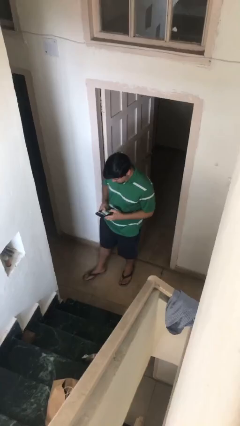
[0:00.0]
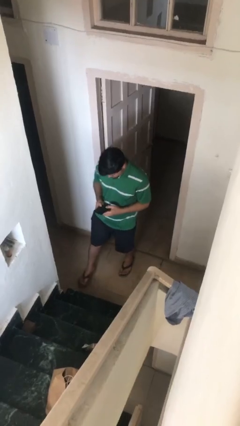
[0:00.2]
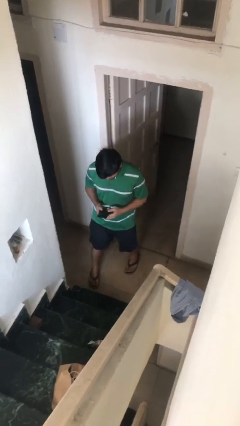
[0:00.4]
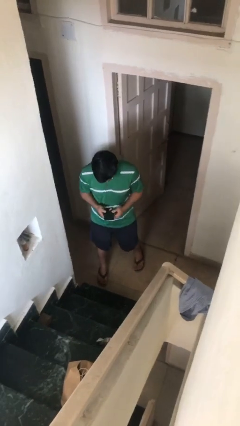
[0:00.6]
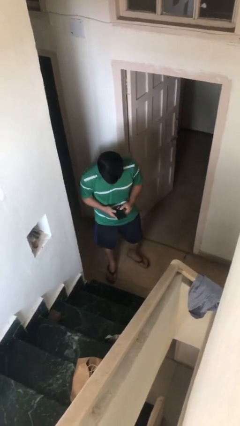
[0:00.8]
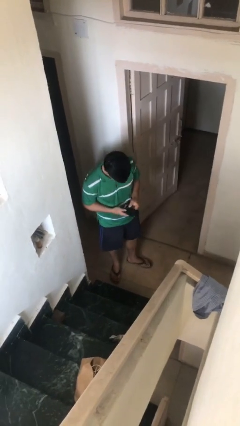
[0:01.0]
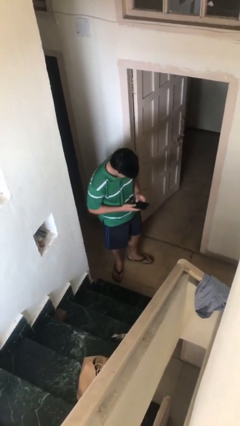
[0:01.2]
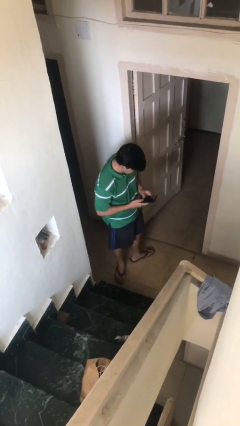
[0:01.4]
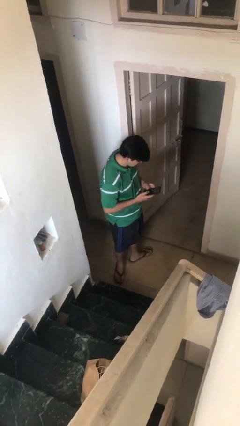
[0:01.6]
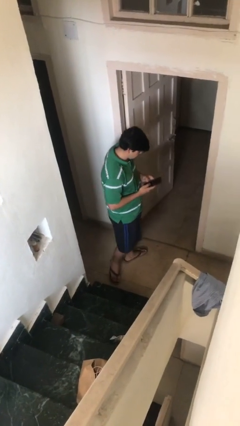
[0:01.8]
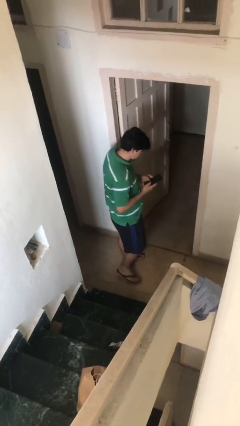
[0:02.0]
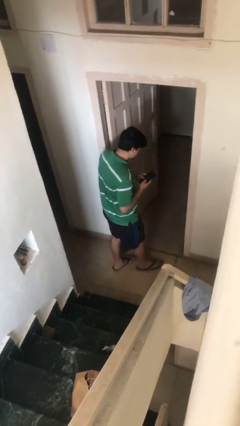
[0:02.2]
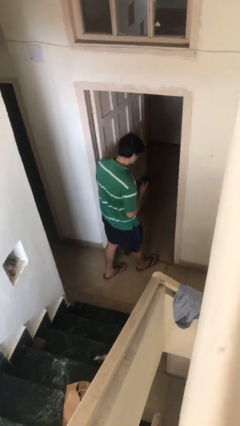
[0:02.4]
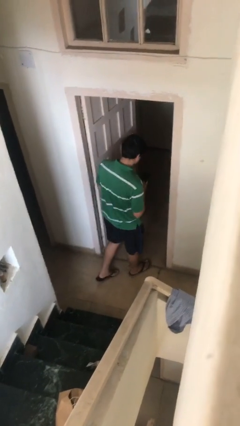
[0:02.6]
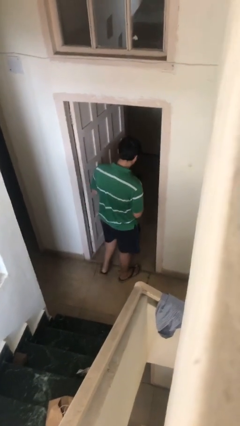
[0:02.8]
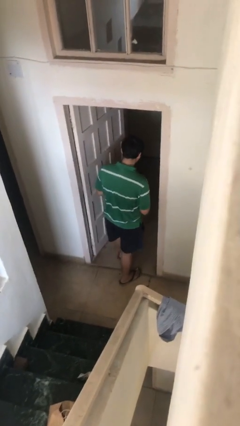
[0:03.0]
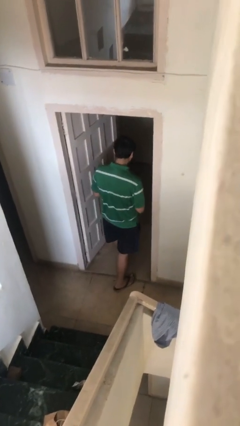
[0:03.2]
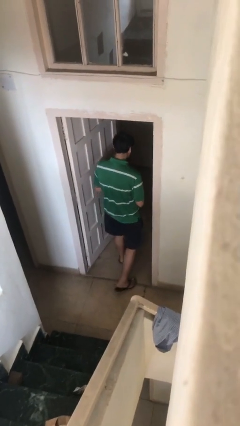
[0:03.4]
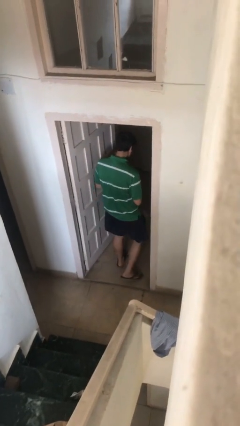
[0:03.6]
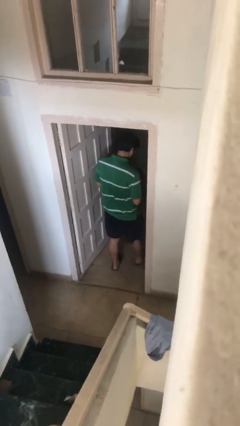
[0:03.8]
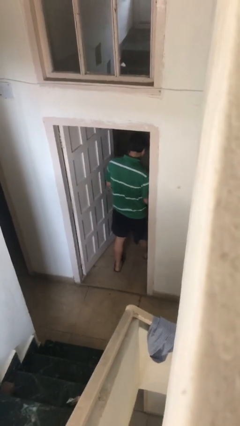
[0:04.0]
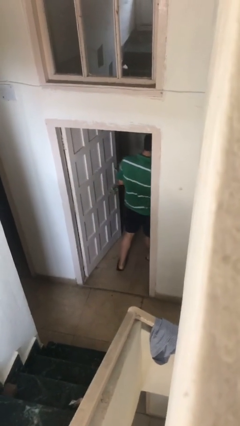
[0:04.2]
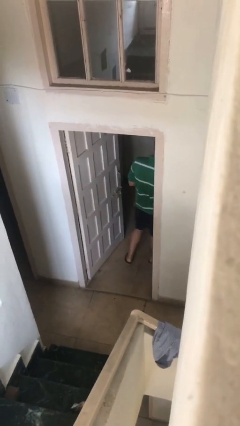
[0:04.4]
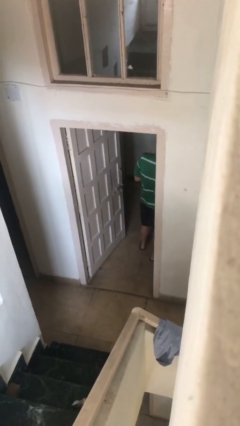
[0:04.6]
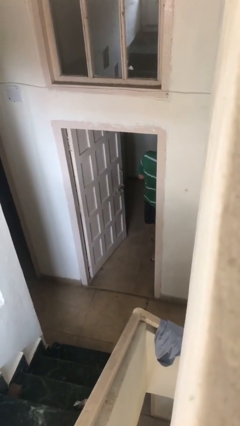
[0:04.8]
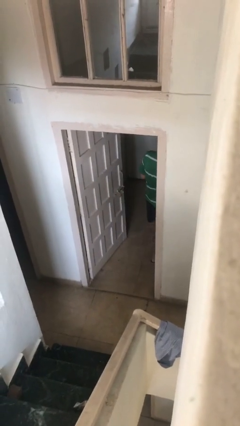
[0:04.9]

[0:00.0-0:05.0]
person exits scene through structure

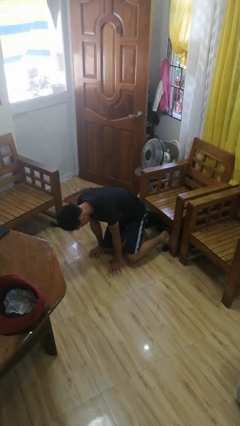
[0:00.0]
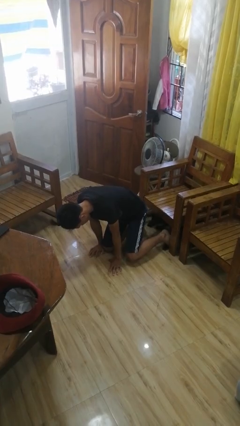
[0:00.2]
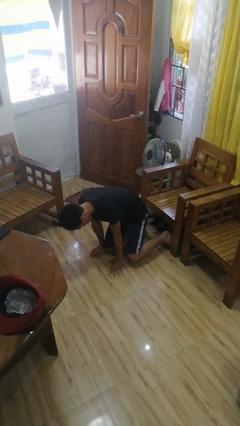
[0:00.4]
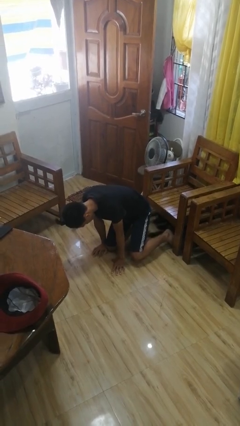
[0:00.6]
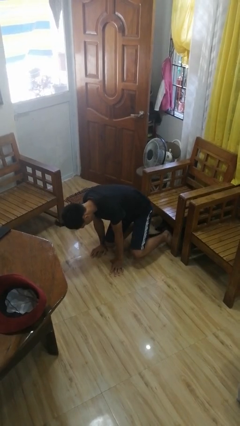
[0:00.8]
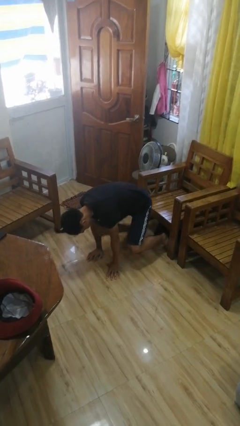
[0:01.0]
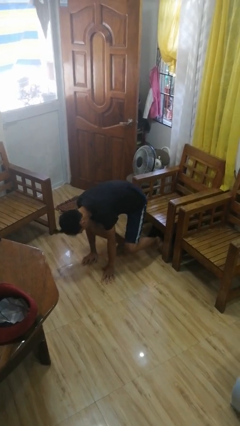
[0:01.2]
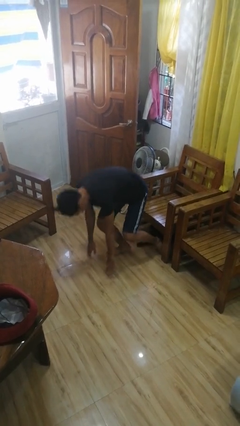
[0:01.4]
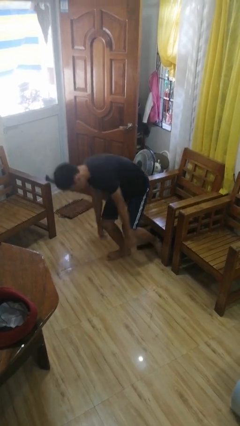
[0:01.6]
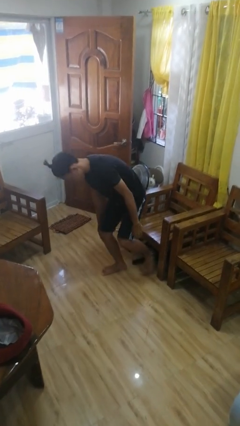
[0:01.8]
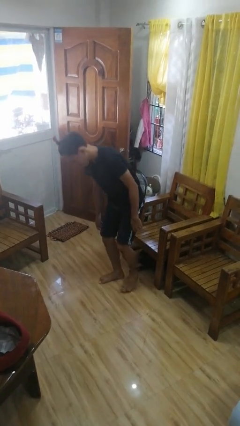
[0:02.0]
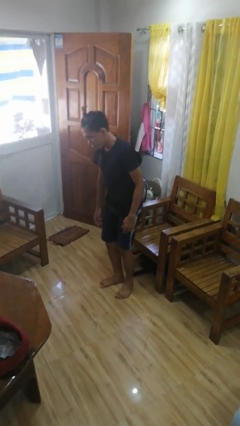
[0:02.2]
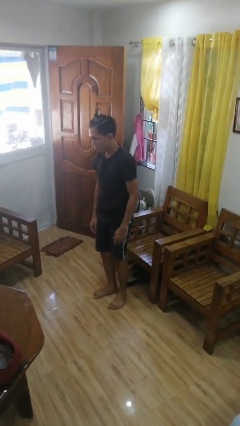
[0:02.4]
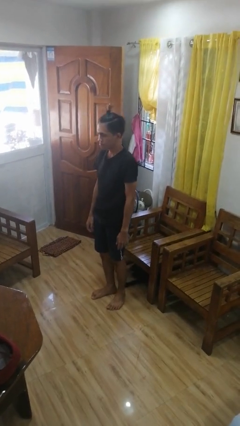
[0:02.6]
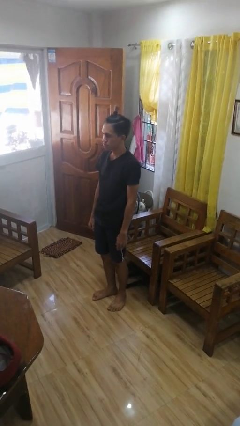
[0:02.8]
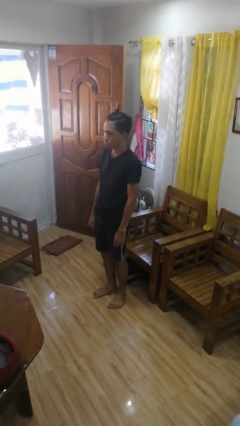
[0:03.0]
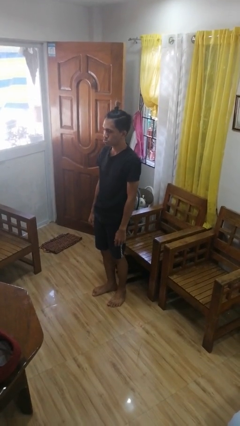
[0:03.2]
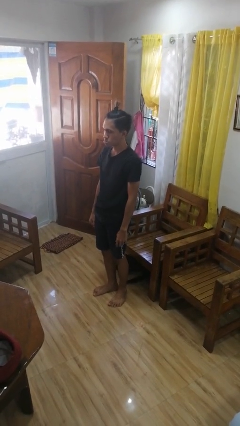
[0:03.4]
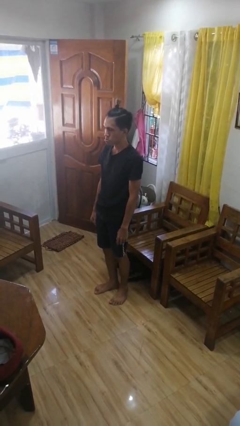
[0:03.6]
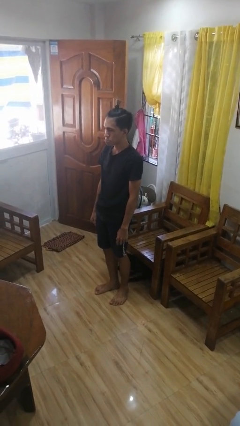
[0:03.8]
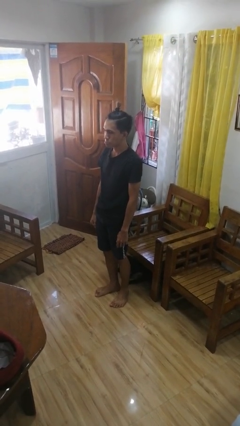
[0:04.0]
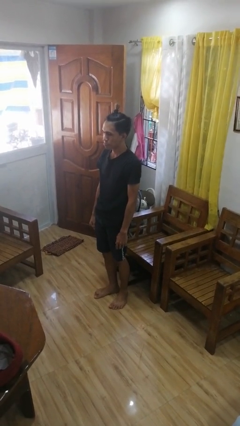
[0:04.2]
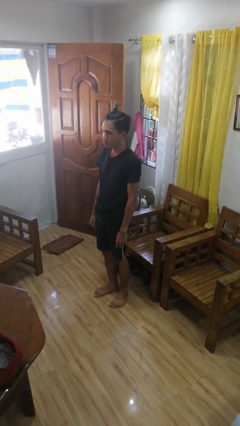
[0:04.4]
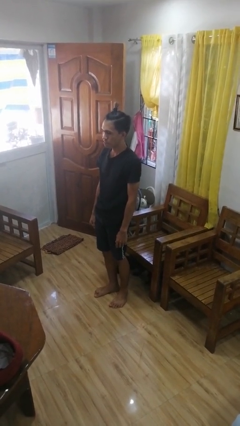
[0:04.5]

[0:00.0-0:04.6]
person stands up from floor

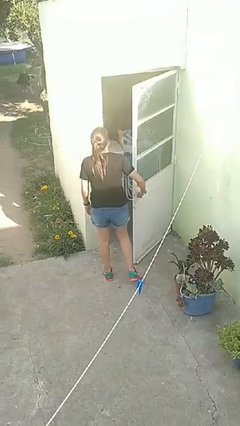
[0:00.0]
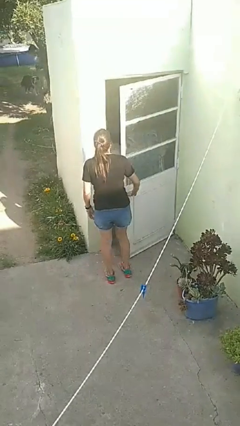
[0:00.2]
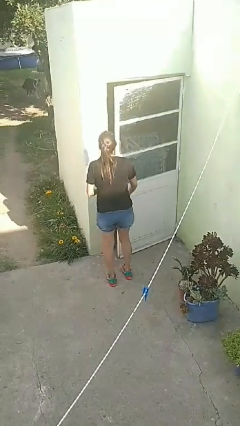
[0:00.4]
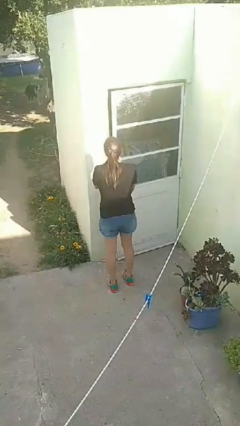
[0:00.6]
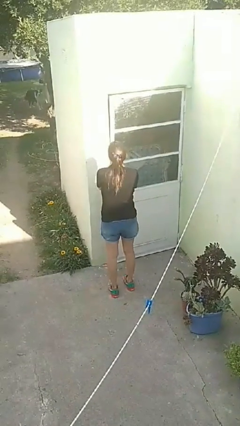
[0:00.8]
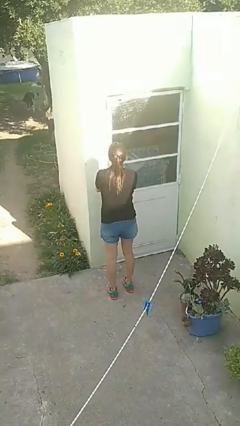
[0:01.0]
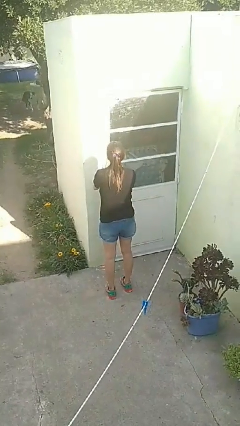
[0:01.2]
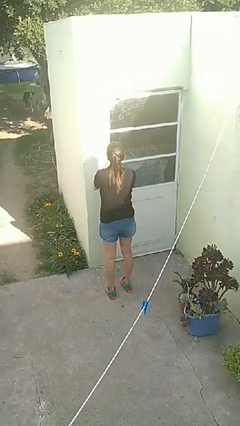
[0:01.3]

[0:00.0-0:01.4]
person closes facility door

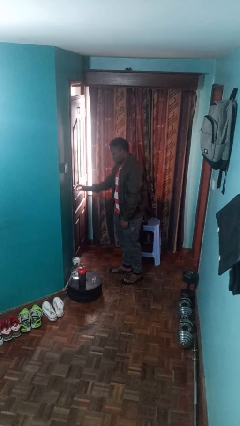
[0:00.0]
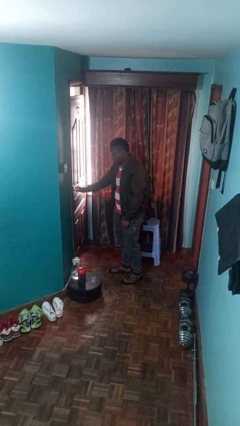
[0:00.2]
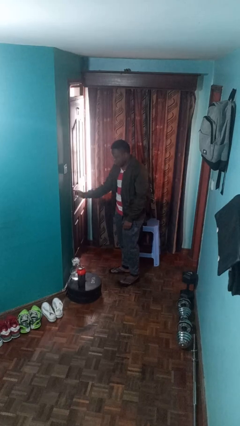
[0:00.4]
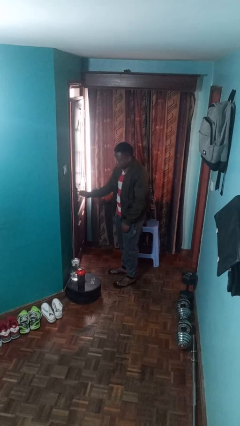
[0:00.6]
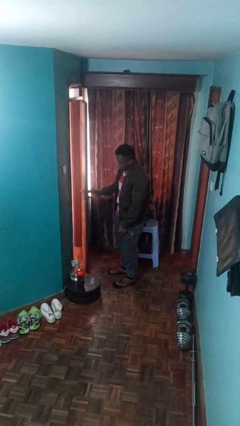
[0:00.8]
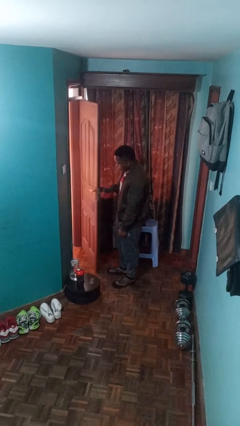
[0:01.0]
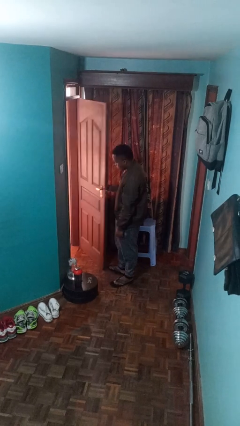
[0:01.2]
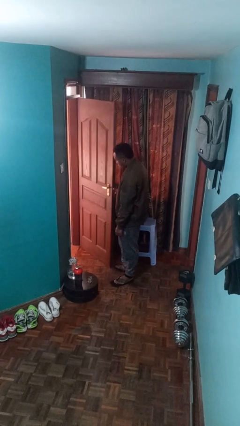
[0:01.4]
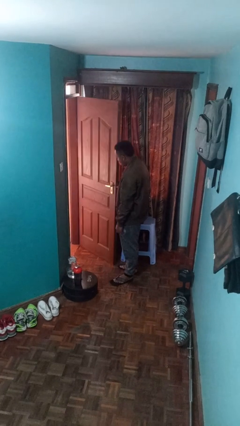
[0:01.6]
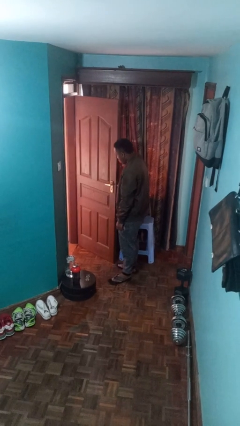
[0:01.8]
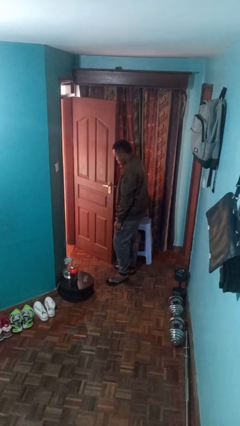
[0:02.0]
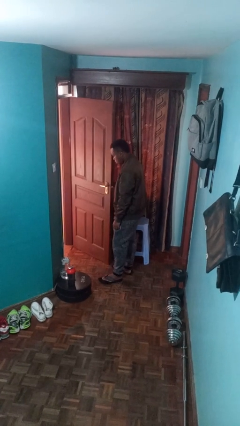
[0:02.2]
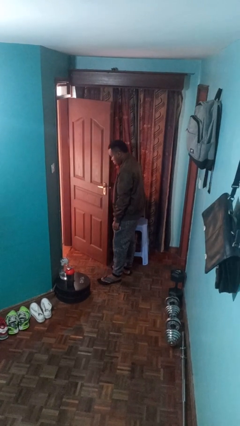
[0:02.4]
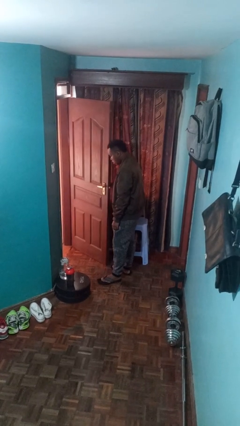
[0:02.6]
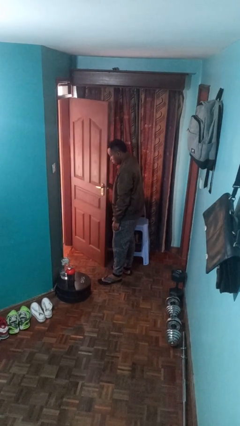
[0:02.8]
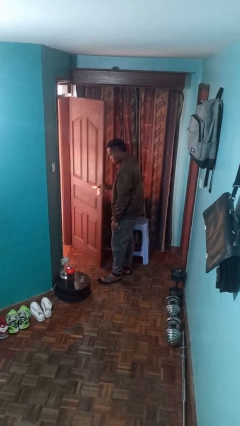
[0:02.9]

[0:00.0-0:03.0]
person opens facility door

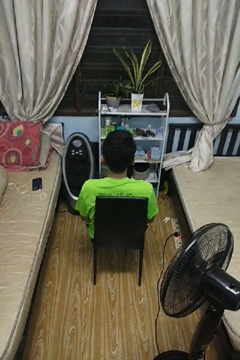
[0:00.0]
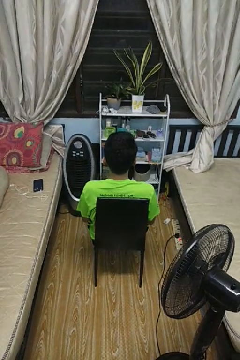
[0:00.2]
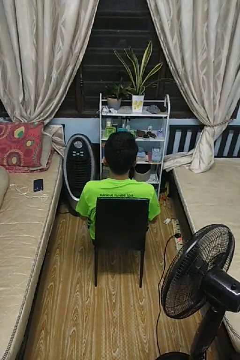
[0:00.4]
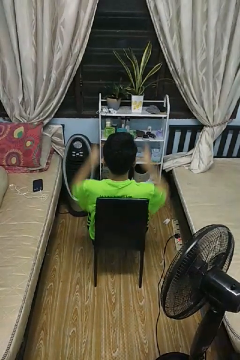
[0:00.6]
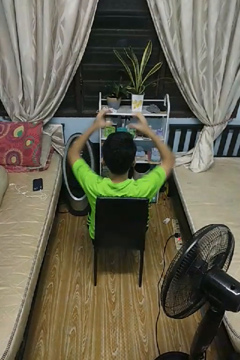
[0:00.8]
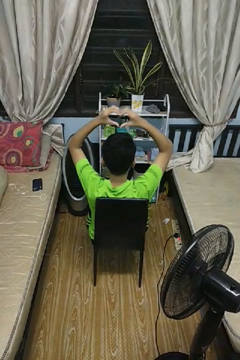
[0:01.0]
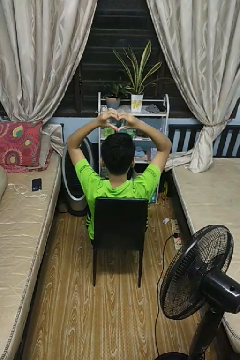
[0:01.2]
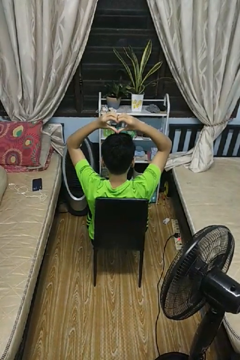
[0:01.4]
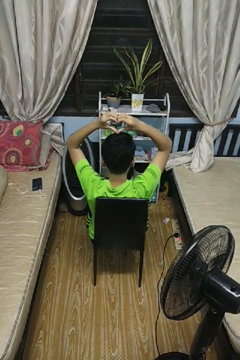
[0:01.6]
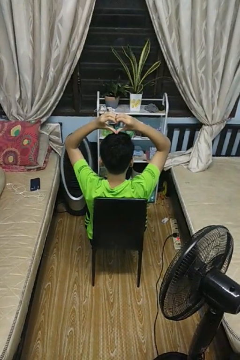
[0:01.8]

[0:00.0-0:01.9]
person gestures heart

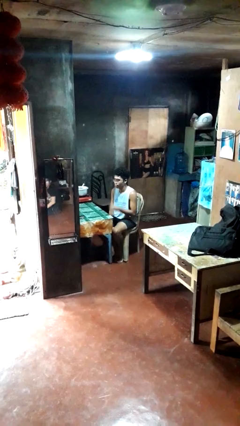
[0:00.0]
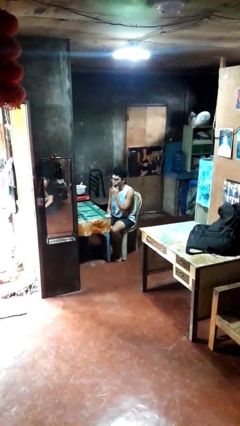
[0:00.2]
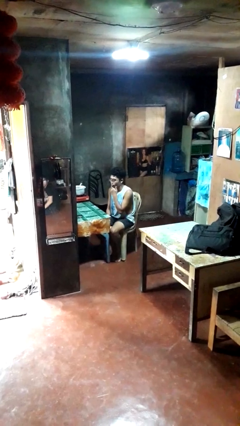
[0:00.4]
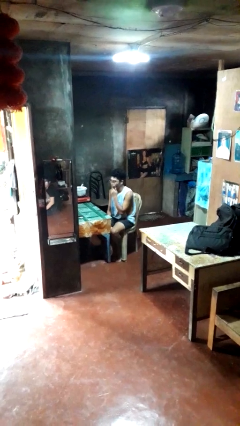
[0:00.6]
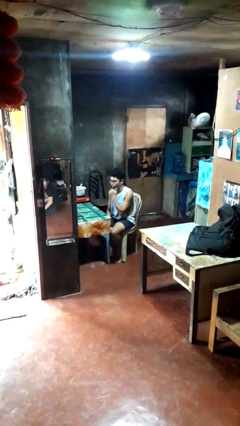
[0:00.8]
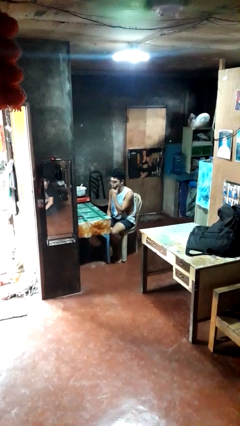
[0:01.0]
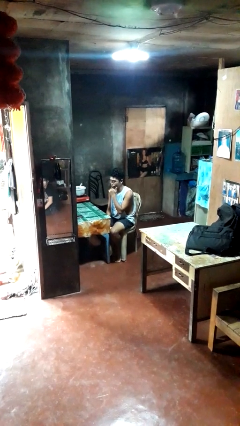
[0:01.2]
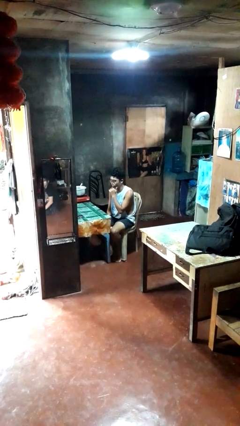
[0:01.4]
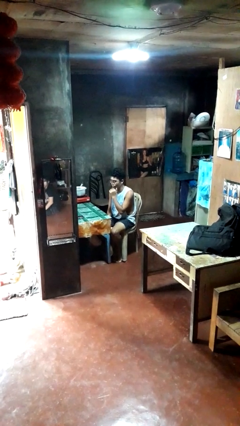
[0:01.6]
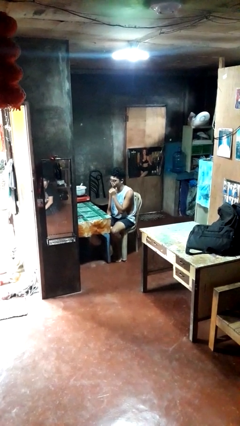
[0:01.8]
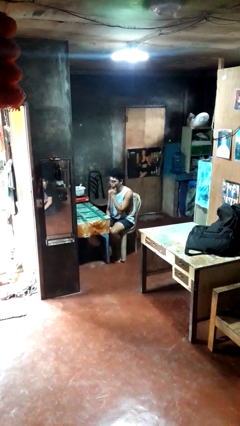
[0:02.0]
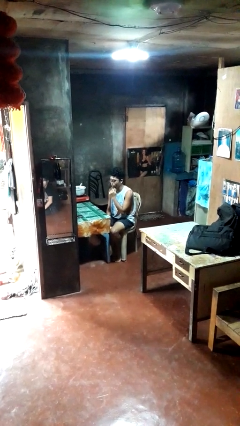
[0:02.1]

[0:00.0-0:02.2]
person strokes chin
